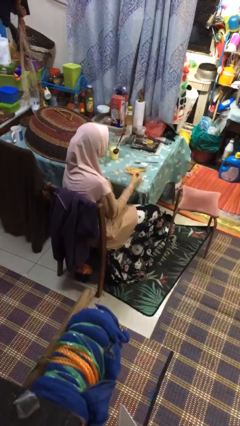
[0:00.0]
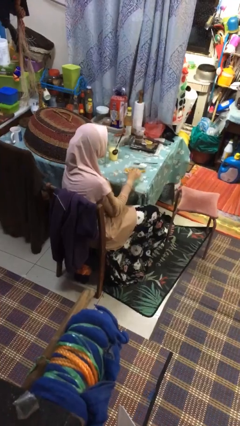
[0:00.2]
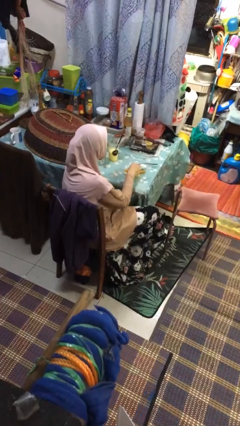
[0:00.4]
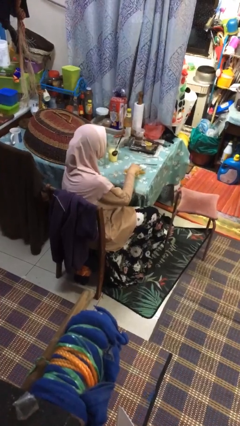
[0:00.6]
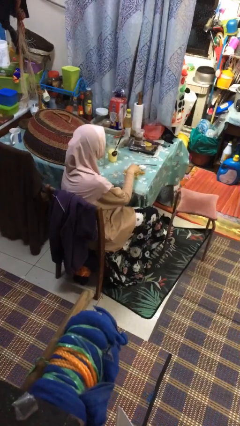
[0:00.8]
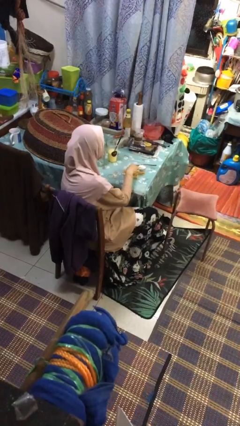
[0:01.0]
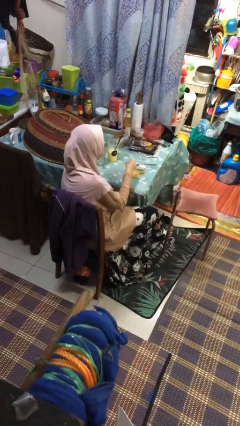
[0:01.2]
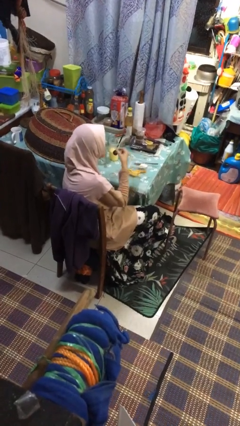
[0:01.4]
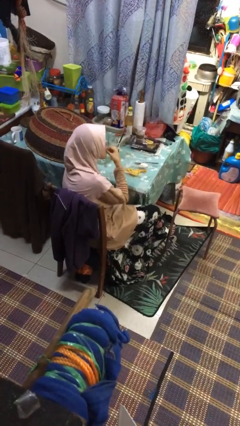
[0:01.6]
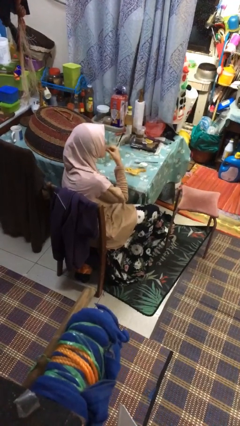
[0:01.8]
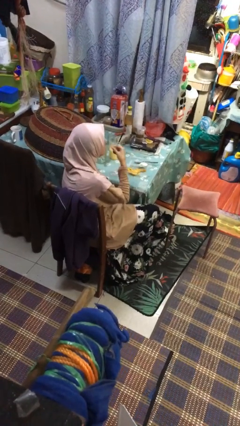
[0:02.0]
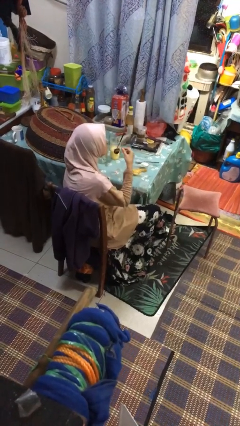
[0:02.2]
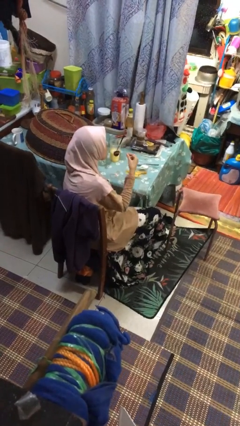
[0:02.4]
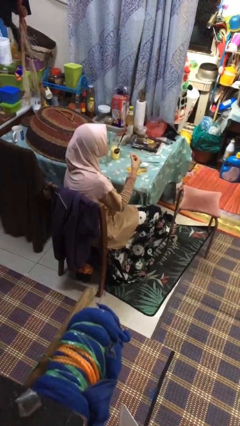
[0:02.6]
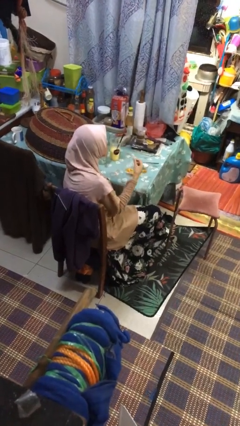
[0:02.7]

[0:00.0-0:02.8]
person eats with hands

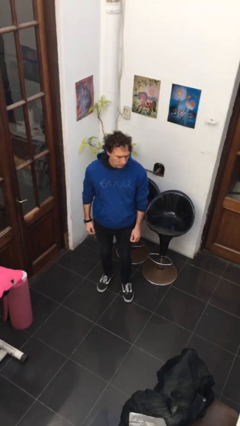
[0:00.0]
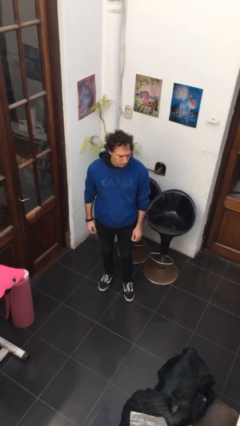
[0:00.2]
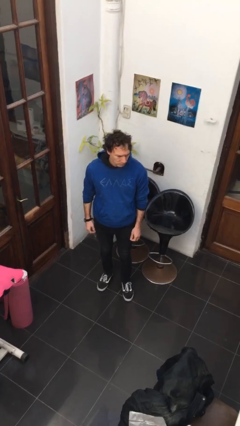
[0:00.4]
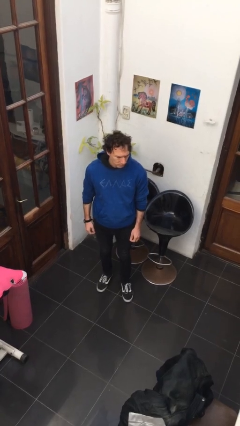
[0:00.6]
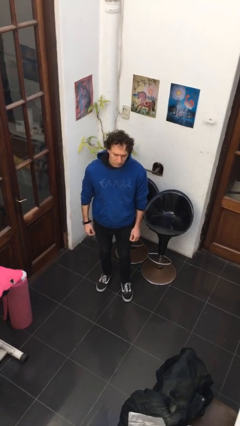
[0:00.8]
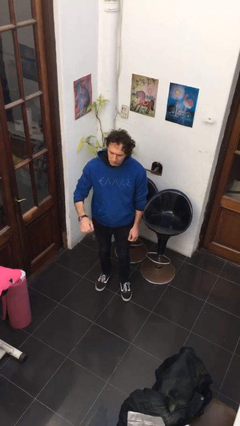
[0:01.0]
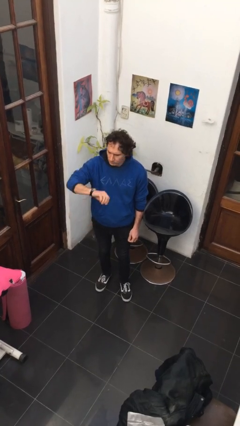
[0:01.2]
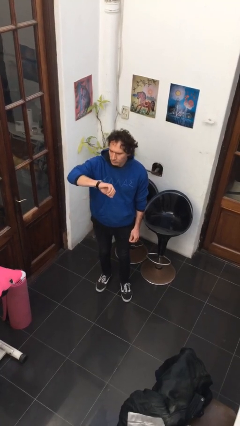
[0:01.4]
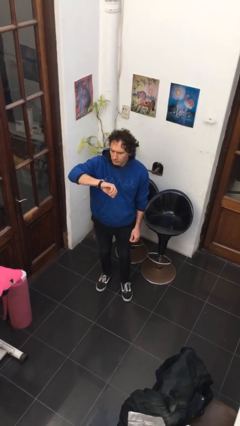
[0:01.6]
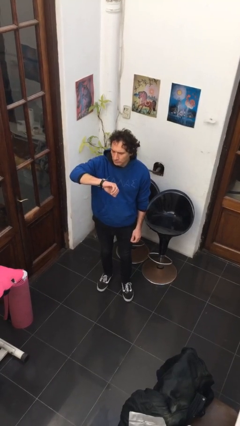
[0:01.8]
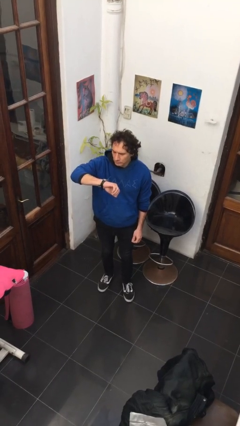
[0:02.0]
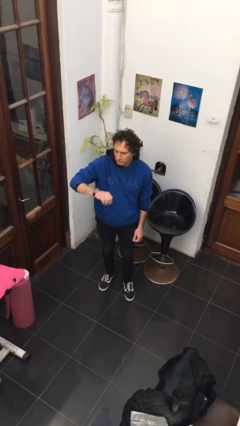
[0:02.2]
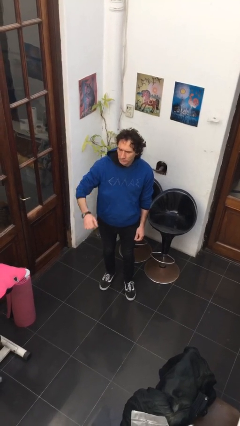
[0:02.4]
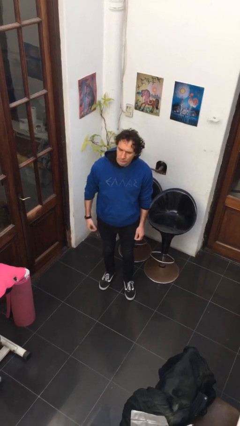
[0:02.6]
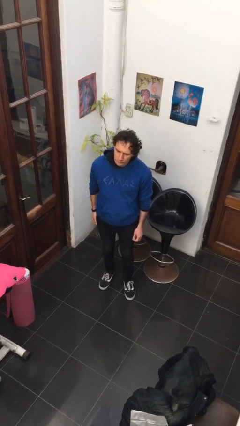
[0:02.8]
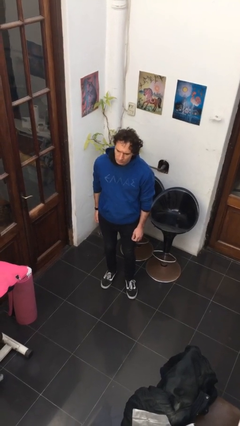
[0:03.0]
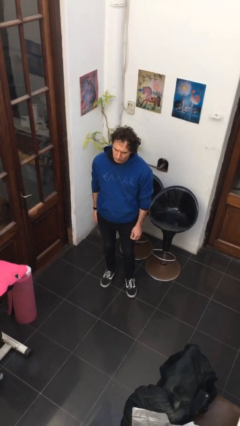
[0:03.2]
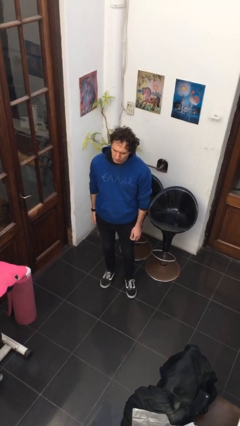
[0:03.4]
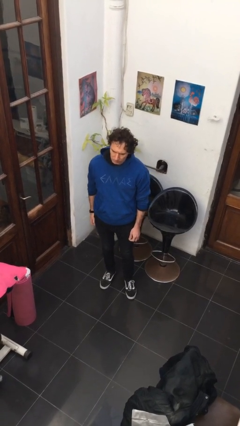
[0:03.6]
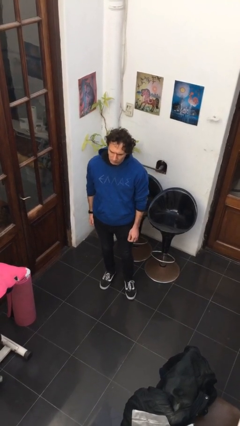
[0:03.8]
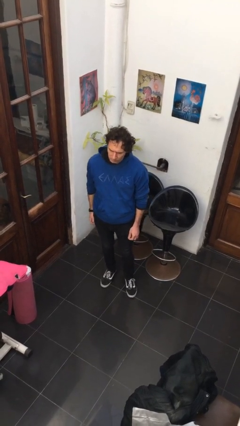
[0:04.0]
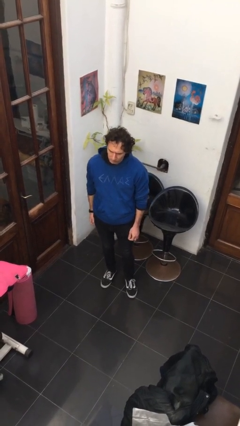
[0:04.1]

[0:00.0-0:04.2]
person looks at wristwatch

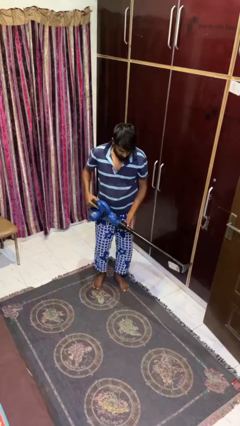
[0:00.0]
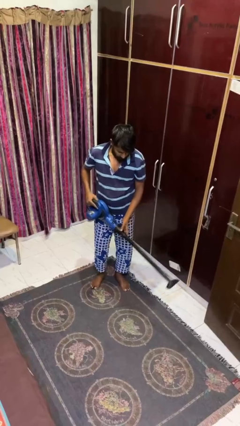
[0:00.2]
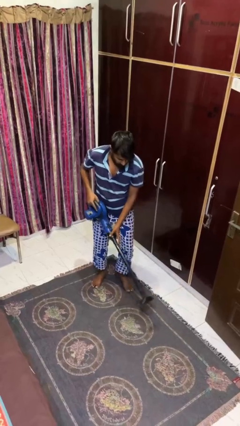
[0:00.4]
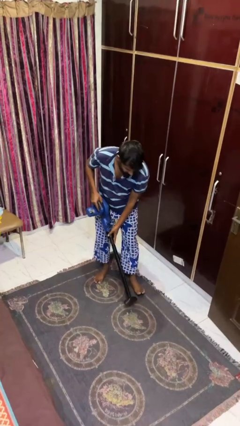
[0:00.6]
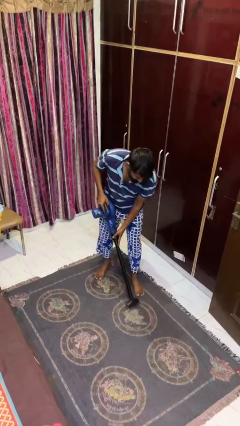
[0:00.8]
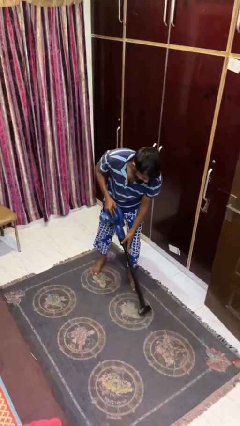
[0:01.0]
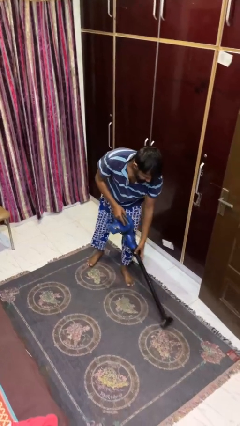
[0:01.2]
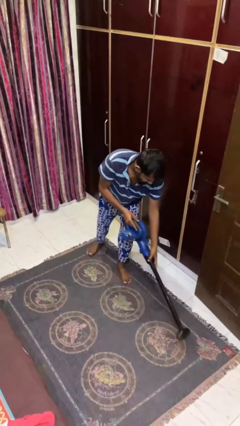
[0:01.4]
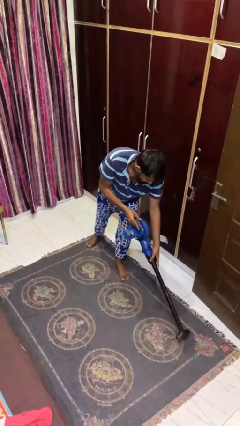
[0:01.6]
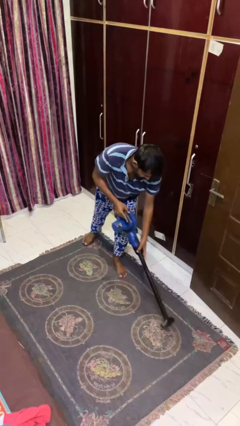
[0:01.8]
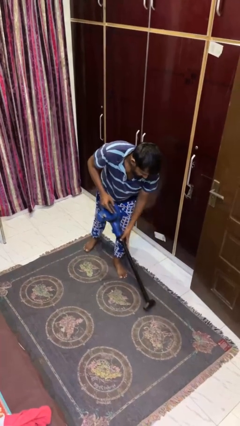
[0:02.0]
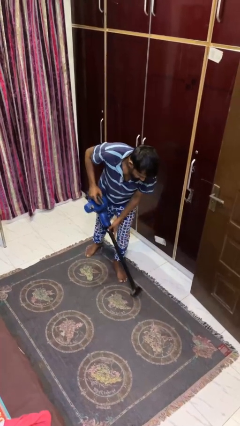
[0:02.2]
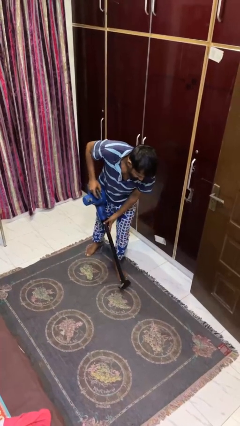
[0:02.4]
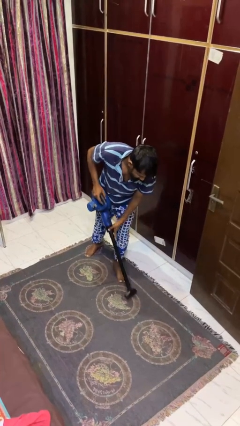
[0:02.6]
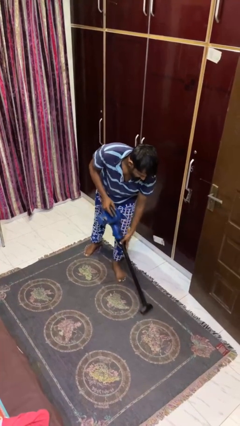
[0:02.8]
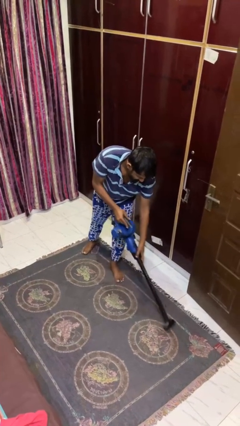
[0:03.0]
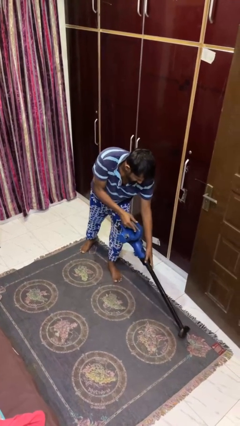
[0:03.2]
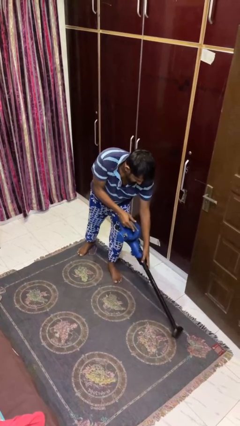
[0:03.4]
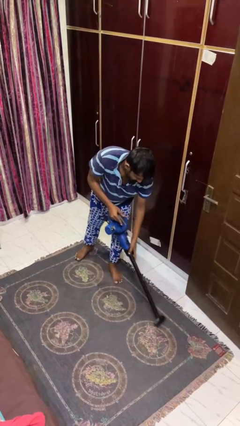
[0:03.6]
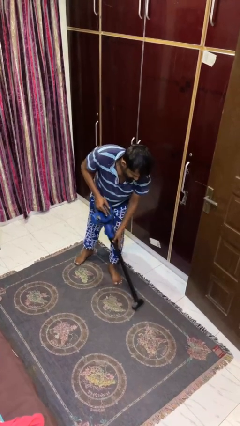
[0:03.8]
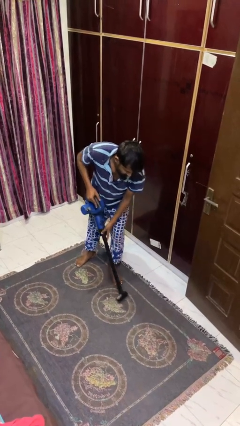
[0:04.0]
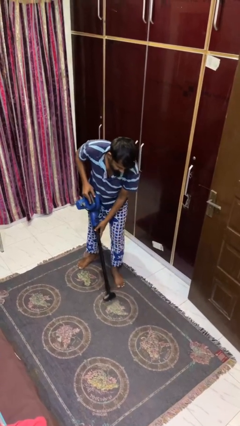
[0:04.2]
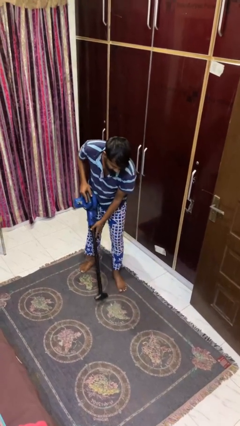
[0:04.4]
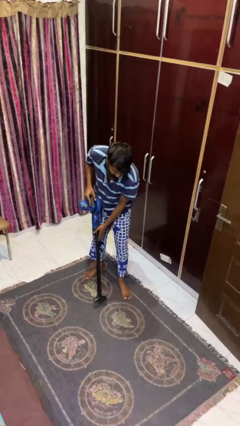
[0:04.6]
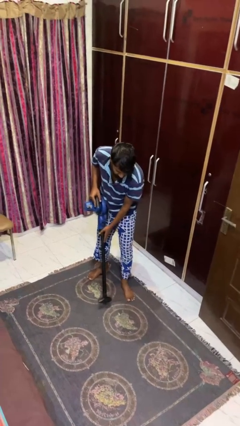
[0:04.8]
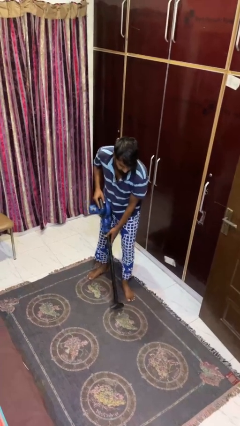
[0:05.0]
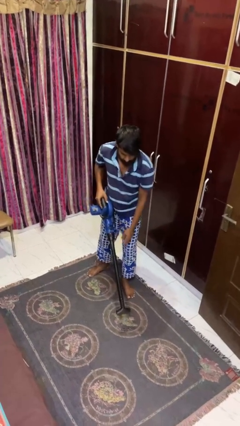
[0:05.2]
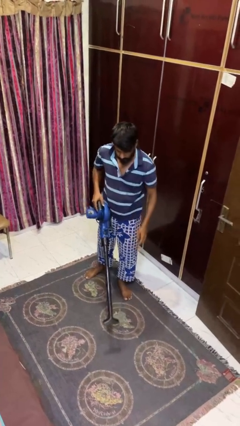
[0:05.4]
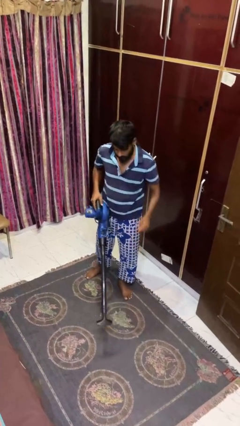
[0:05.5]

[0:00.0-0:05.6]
person vacuums carpet

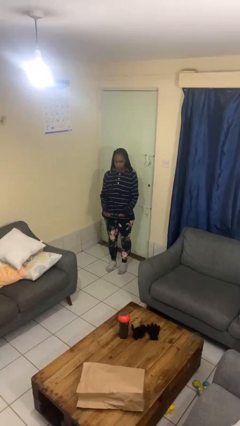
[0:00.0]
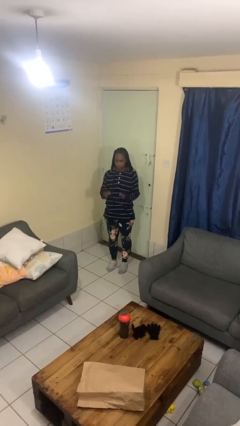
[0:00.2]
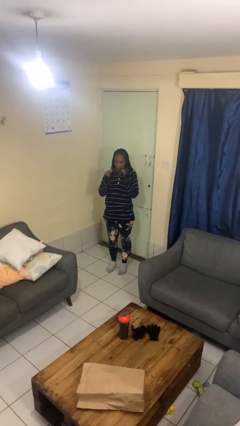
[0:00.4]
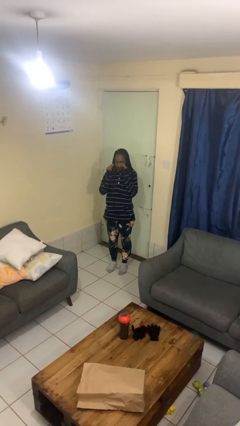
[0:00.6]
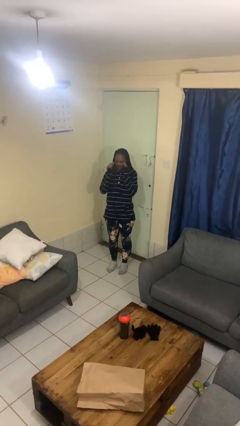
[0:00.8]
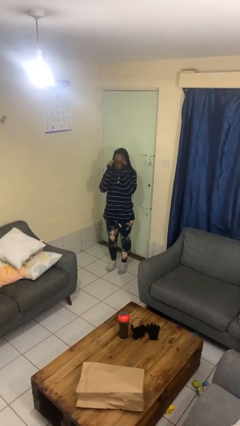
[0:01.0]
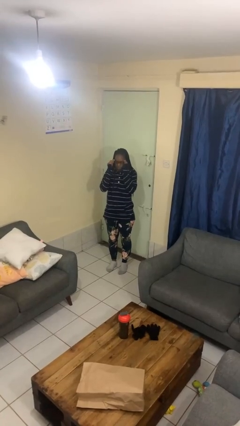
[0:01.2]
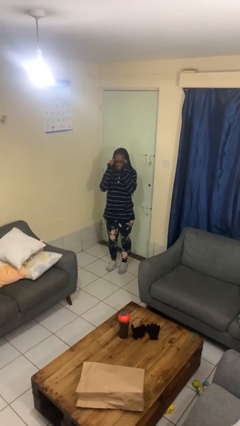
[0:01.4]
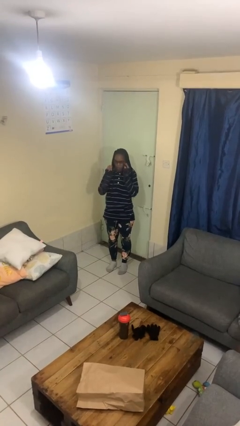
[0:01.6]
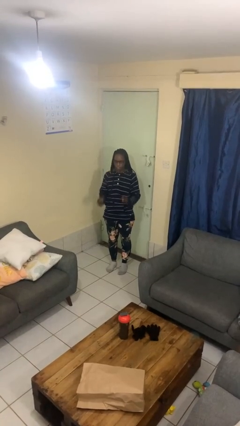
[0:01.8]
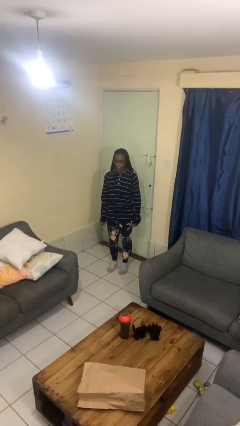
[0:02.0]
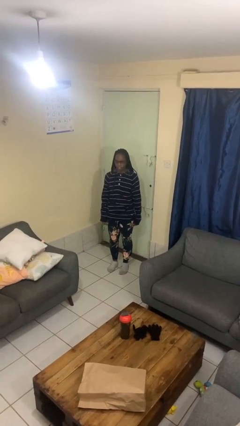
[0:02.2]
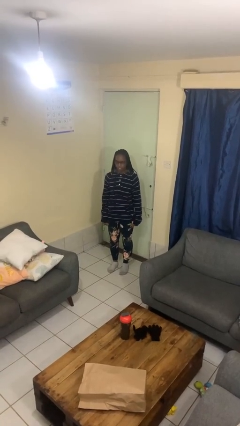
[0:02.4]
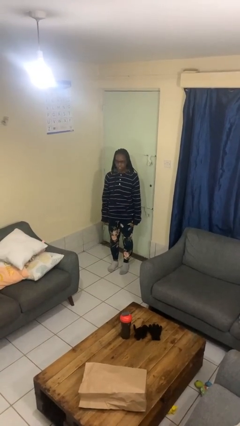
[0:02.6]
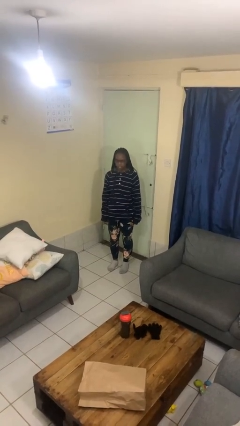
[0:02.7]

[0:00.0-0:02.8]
person puts on glasses

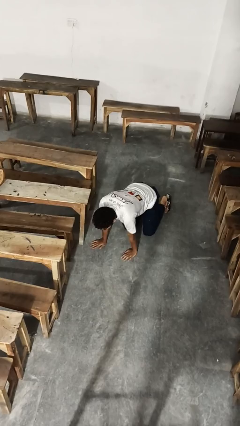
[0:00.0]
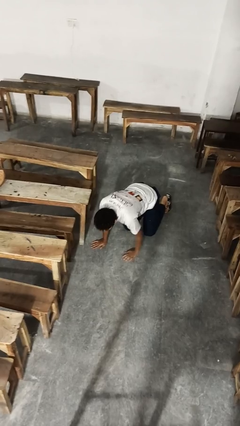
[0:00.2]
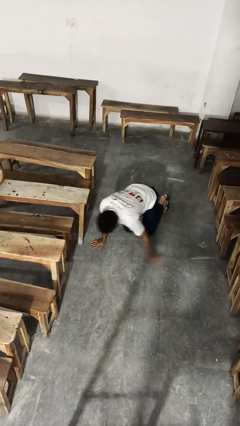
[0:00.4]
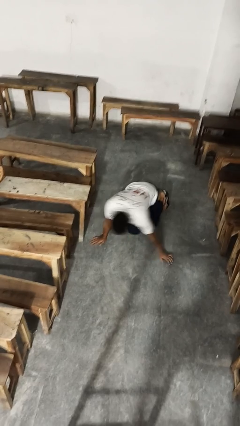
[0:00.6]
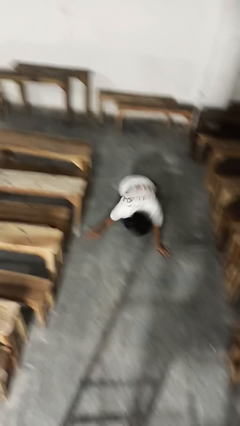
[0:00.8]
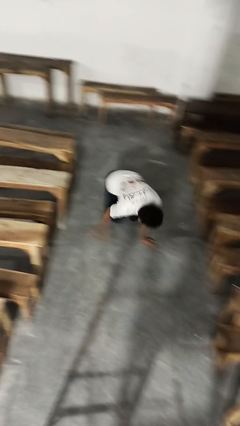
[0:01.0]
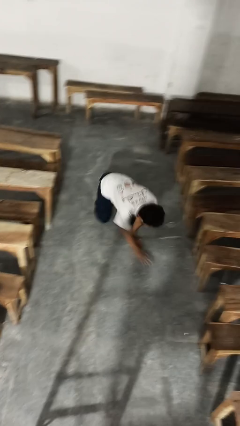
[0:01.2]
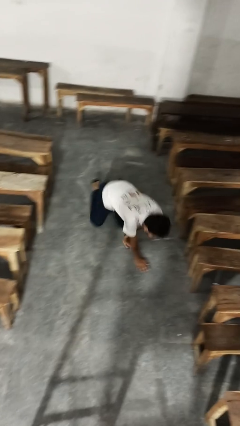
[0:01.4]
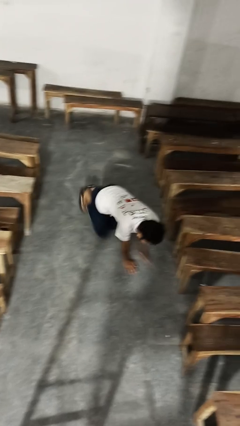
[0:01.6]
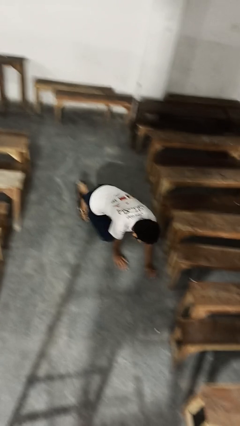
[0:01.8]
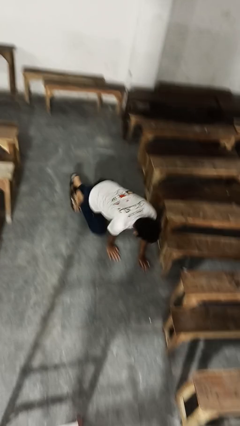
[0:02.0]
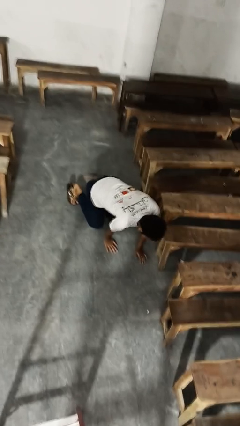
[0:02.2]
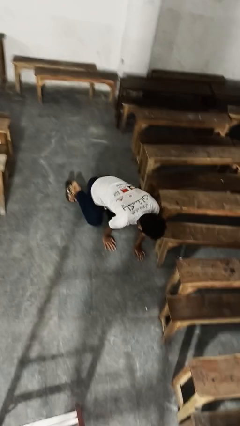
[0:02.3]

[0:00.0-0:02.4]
person crawls
